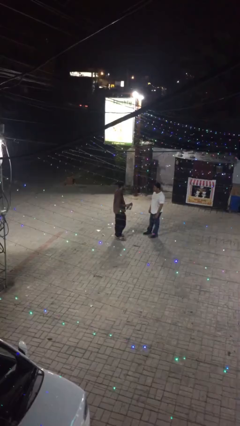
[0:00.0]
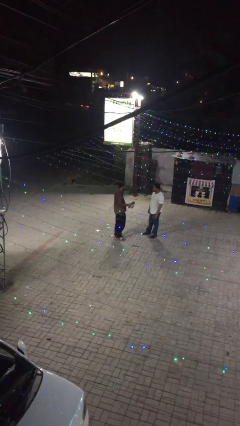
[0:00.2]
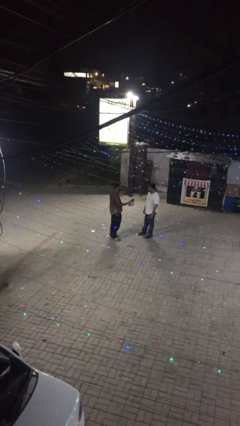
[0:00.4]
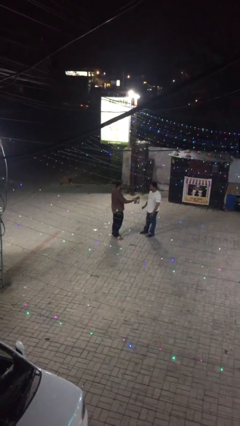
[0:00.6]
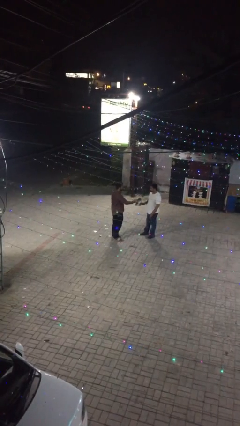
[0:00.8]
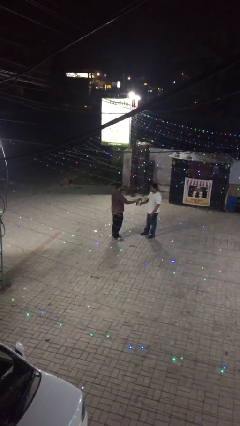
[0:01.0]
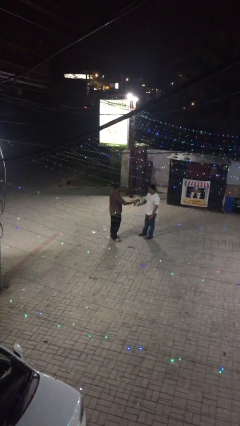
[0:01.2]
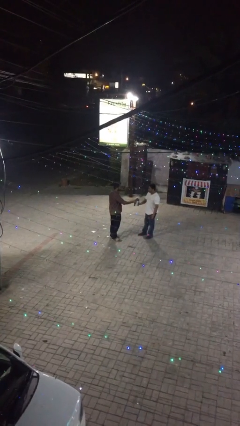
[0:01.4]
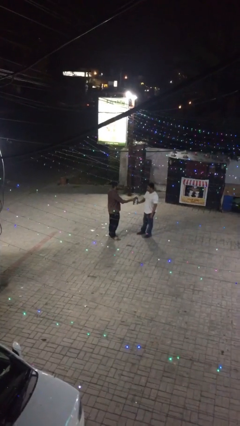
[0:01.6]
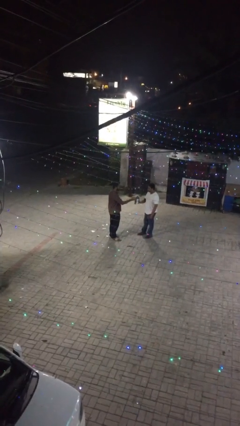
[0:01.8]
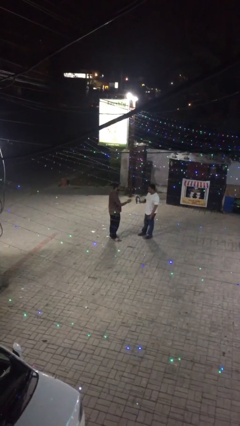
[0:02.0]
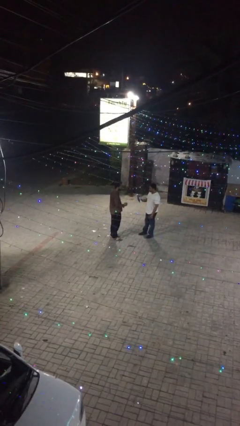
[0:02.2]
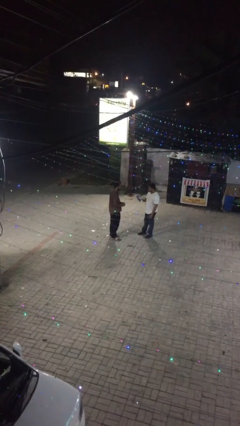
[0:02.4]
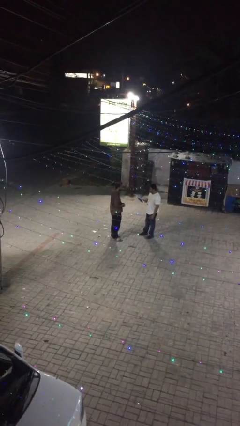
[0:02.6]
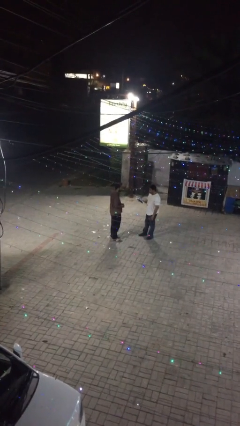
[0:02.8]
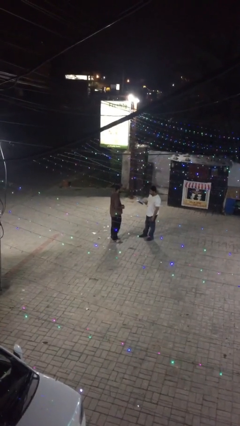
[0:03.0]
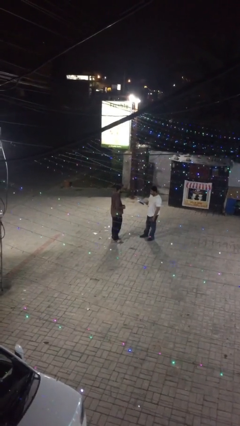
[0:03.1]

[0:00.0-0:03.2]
person transfers object to person

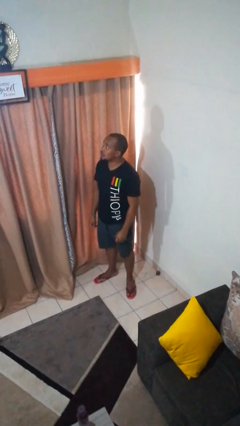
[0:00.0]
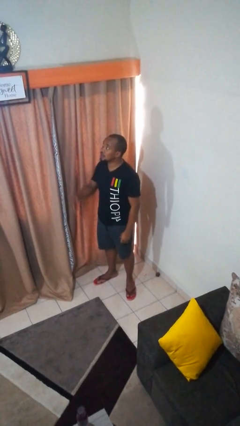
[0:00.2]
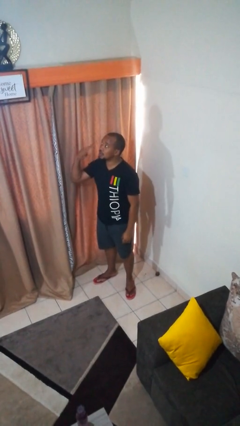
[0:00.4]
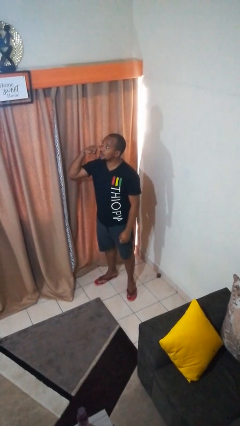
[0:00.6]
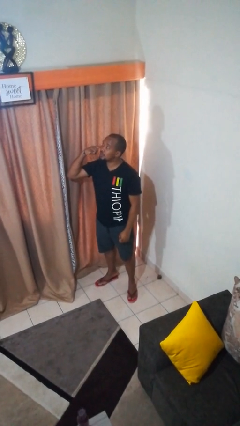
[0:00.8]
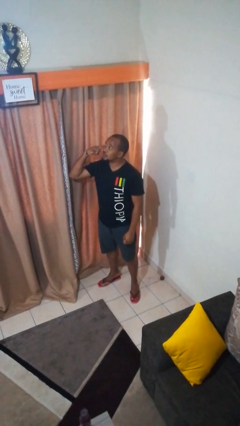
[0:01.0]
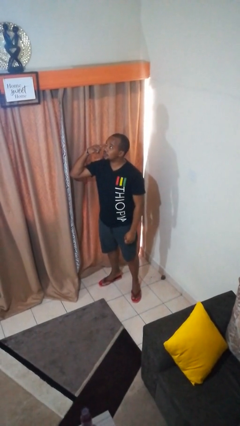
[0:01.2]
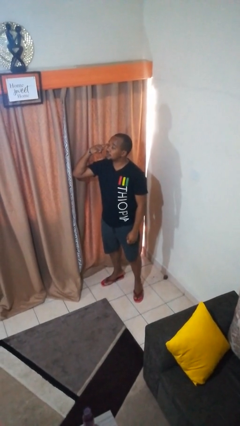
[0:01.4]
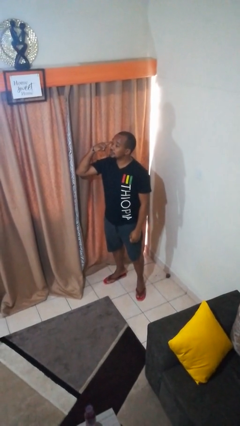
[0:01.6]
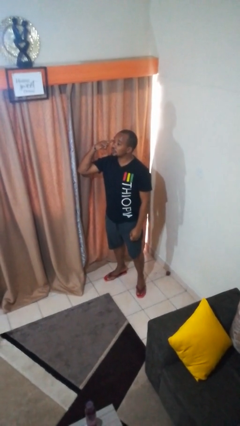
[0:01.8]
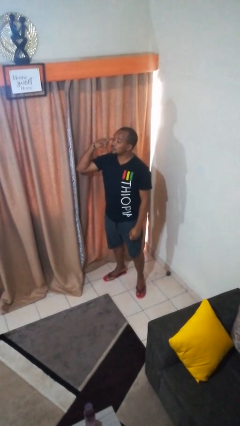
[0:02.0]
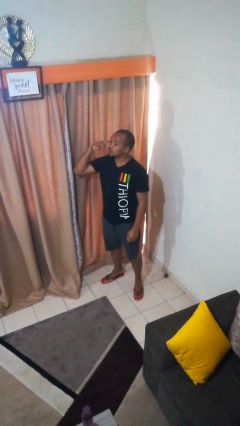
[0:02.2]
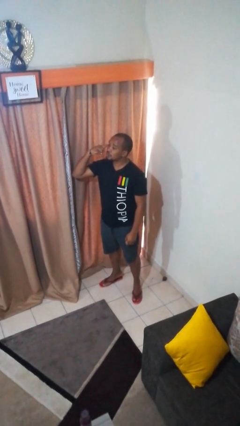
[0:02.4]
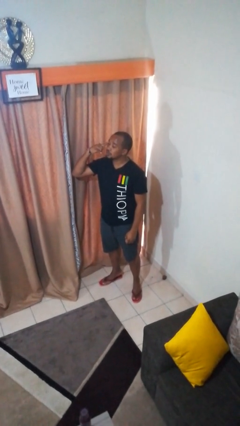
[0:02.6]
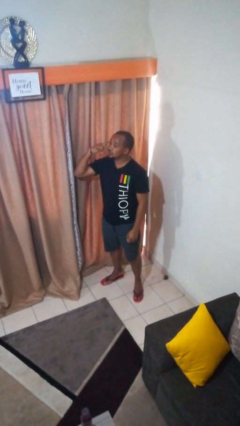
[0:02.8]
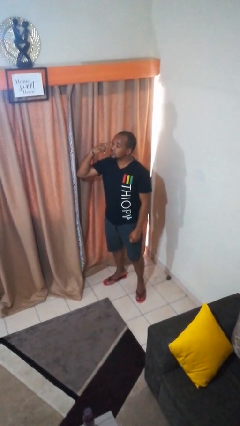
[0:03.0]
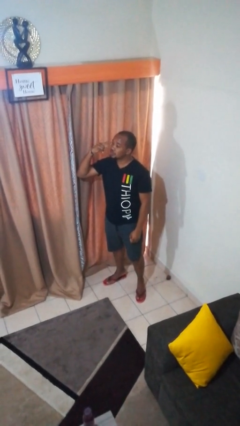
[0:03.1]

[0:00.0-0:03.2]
person gestures call me

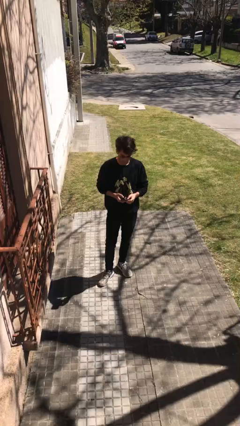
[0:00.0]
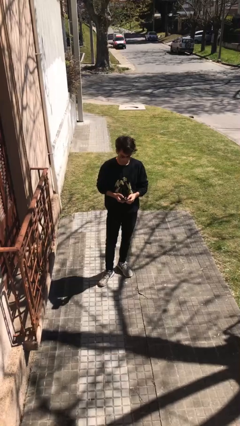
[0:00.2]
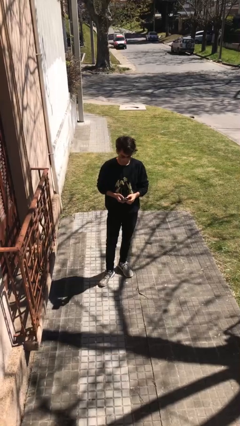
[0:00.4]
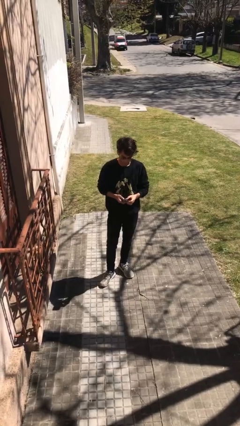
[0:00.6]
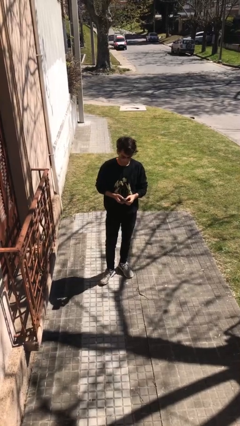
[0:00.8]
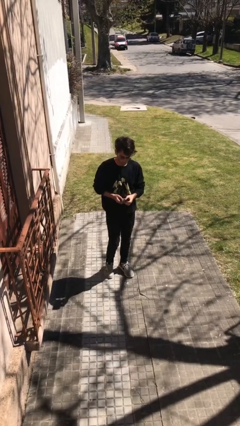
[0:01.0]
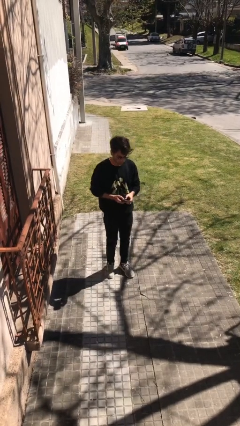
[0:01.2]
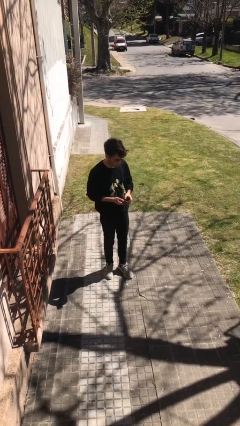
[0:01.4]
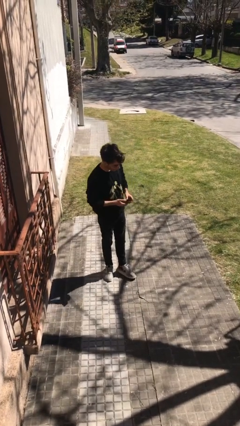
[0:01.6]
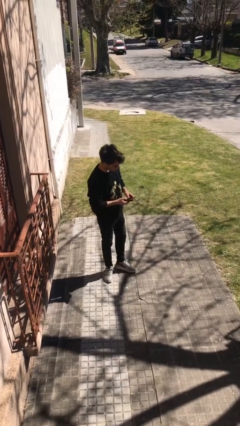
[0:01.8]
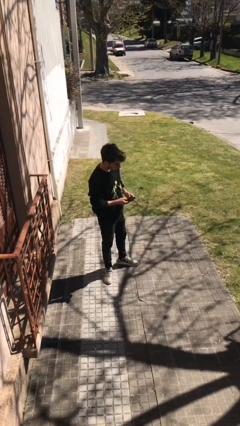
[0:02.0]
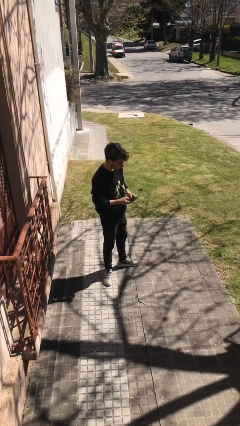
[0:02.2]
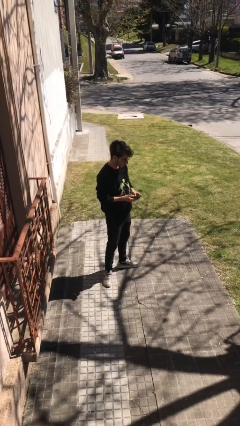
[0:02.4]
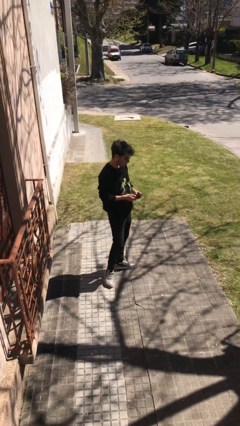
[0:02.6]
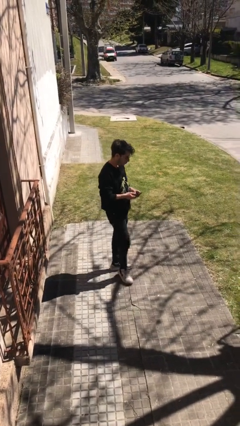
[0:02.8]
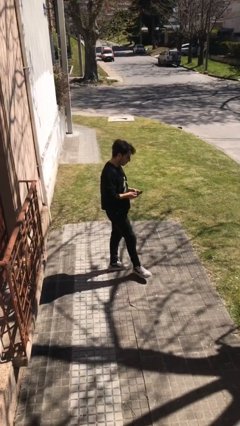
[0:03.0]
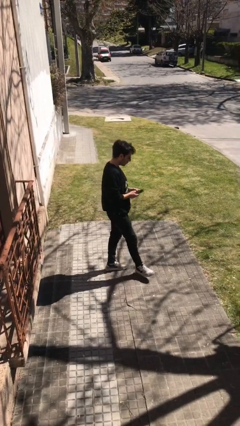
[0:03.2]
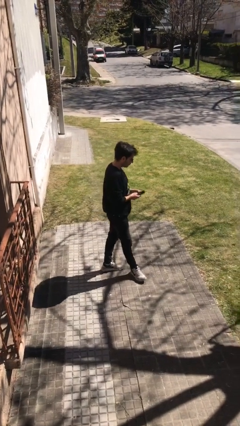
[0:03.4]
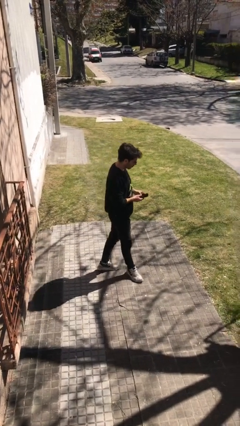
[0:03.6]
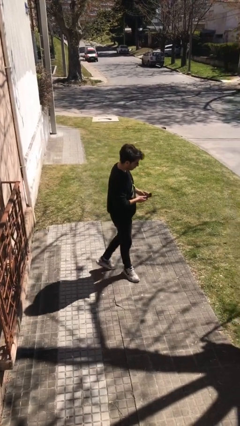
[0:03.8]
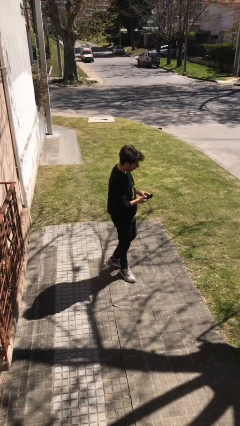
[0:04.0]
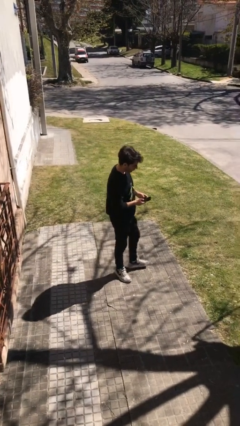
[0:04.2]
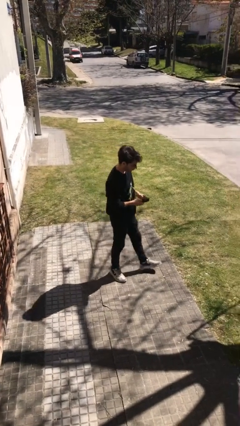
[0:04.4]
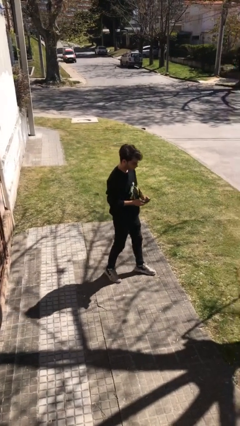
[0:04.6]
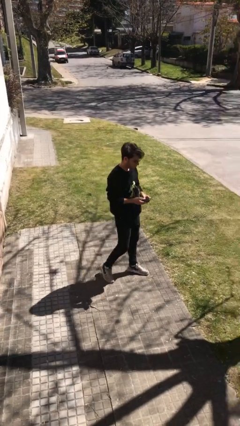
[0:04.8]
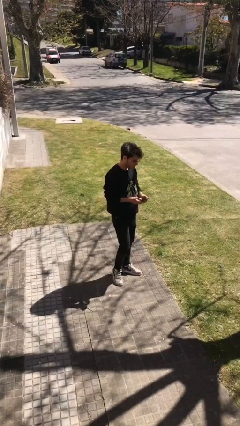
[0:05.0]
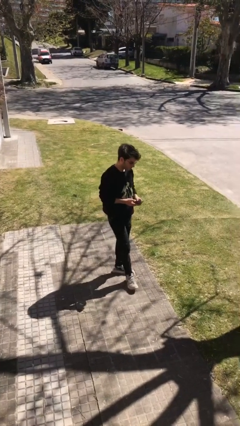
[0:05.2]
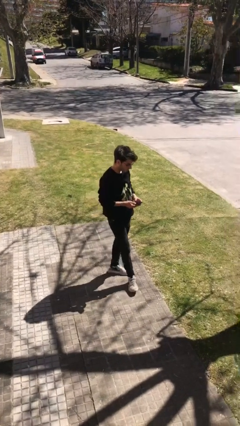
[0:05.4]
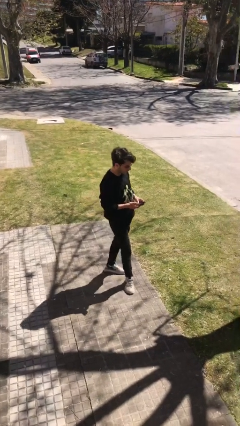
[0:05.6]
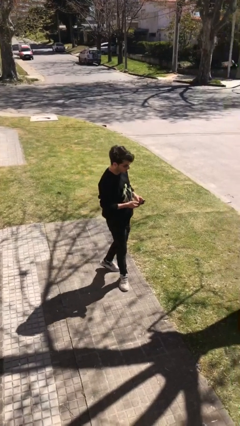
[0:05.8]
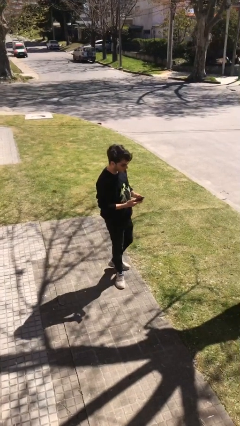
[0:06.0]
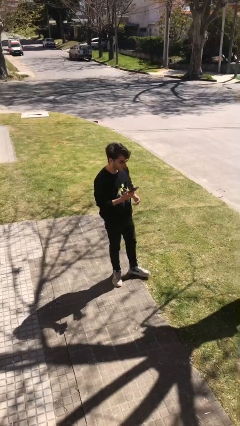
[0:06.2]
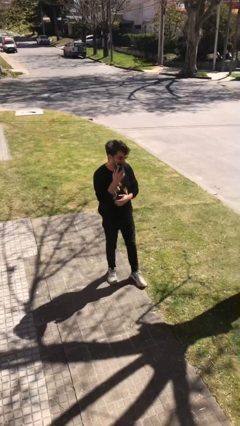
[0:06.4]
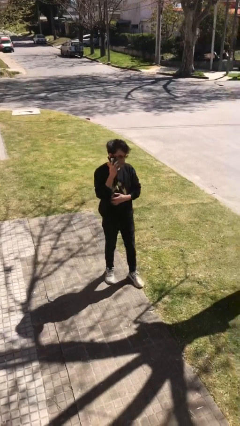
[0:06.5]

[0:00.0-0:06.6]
person texts on phone

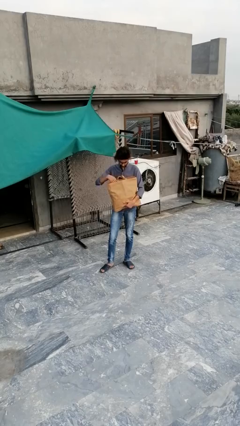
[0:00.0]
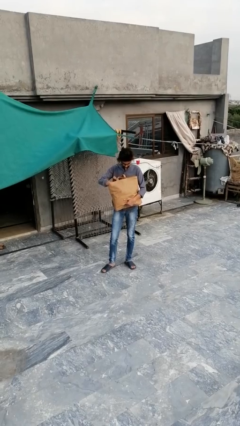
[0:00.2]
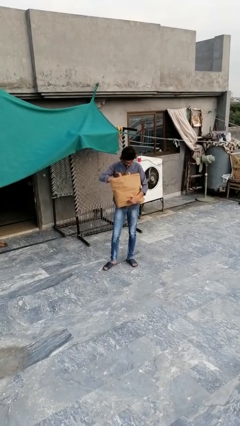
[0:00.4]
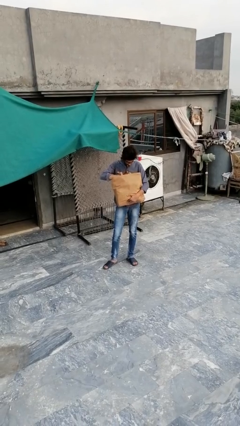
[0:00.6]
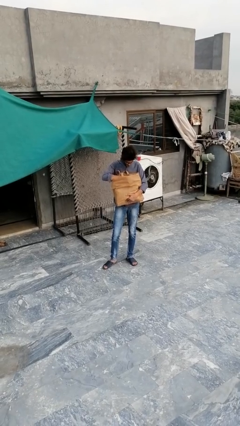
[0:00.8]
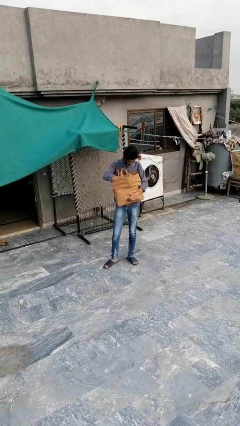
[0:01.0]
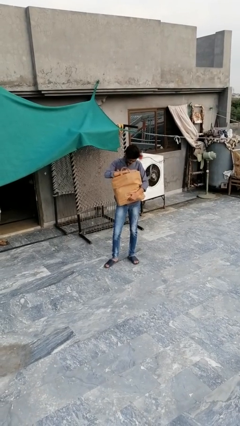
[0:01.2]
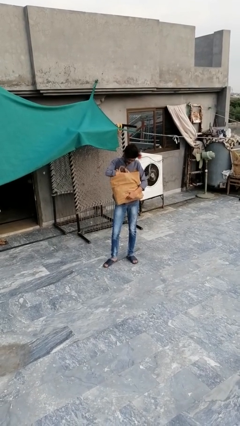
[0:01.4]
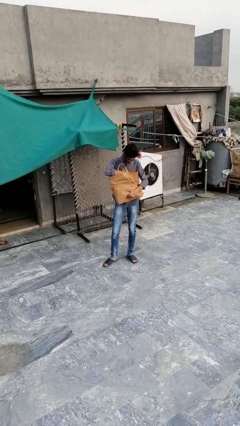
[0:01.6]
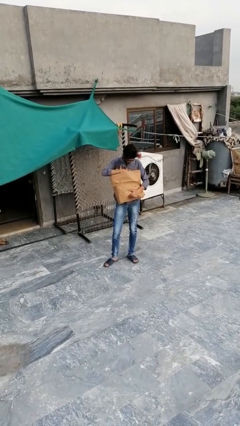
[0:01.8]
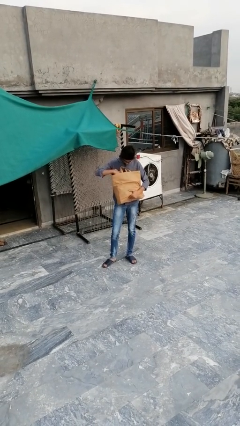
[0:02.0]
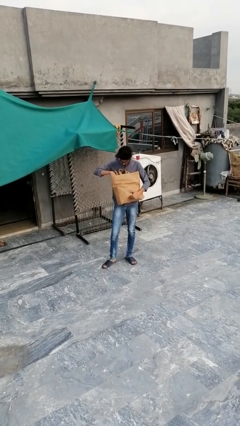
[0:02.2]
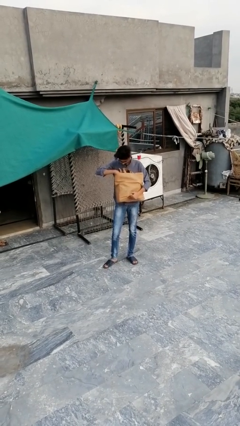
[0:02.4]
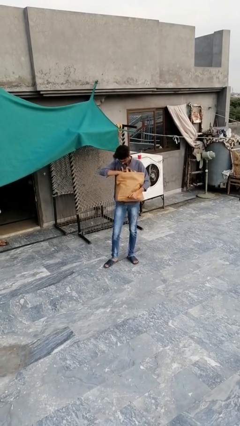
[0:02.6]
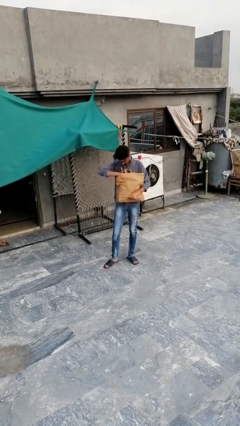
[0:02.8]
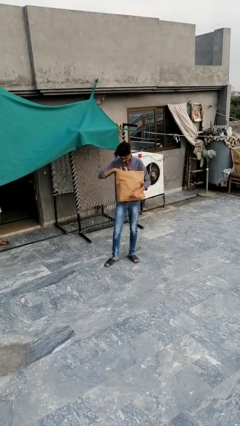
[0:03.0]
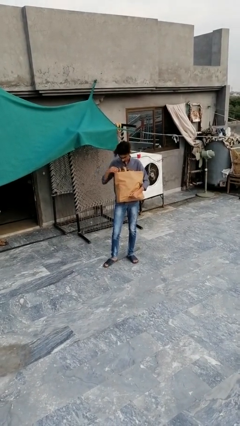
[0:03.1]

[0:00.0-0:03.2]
person searches in bag

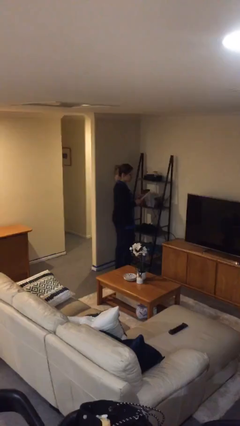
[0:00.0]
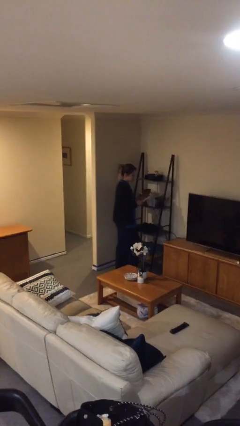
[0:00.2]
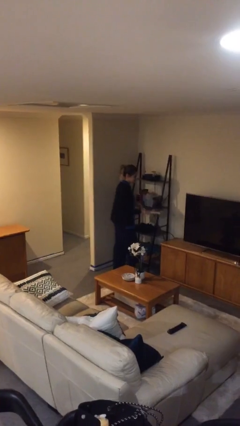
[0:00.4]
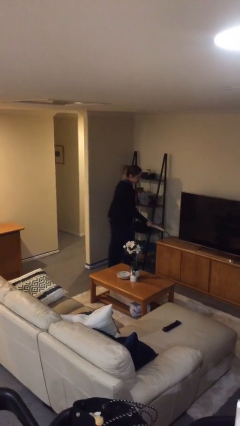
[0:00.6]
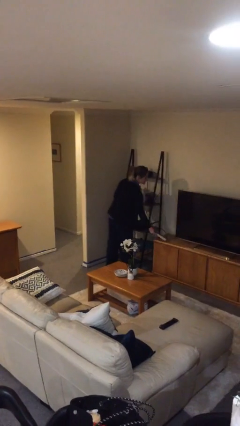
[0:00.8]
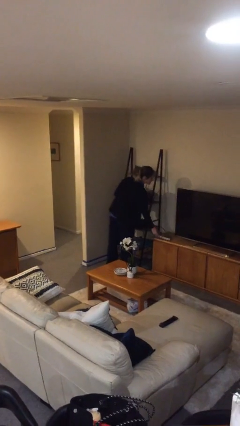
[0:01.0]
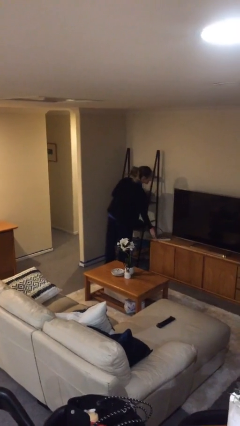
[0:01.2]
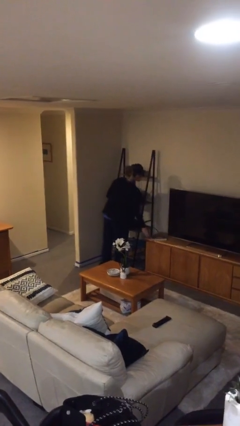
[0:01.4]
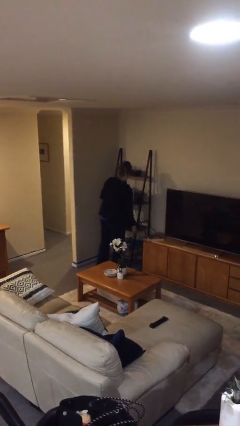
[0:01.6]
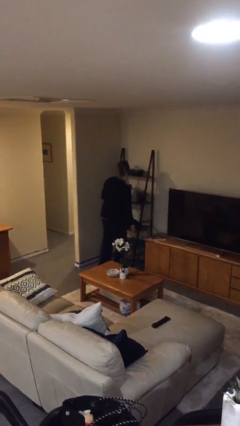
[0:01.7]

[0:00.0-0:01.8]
person puts down object on table
